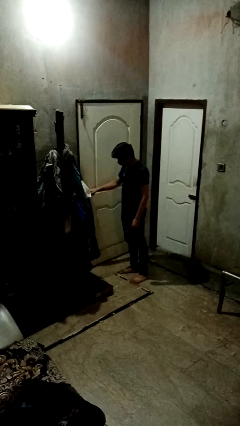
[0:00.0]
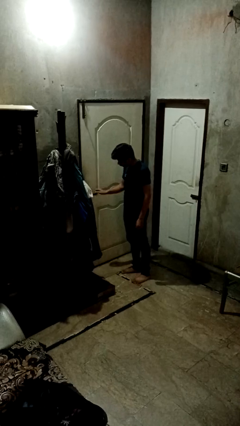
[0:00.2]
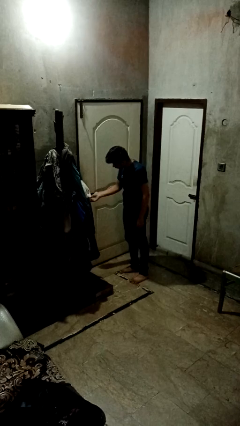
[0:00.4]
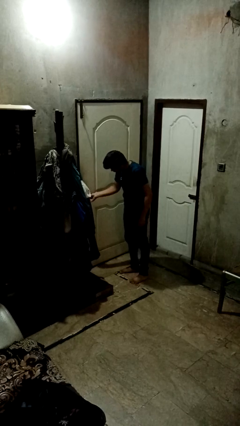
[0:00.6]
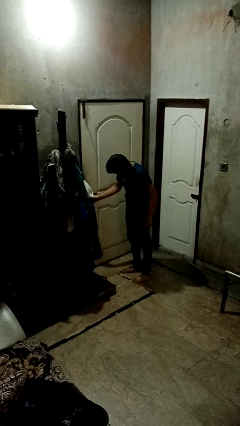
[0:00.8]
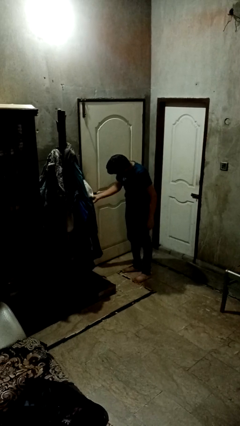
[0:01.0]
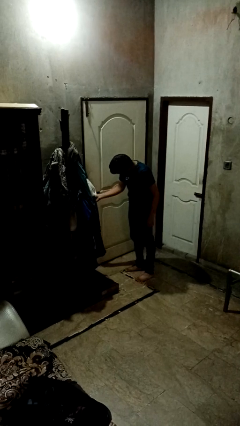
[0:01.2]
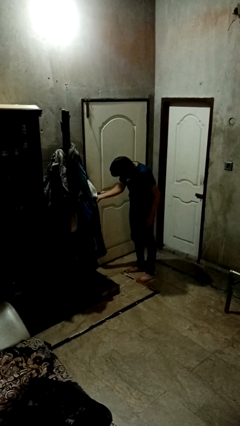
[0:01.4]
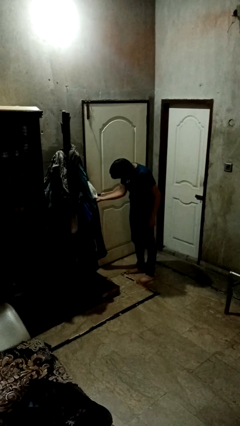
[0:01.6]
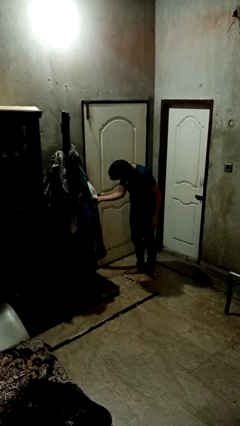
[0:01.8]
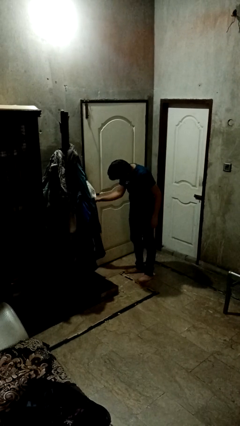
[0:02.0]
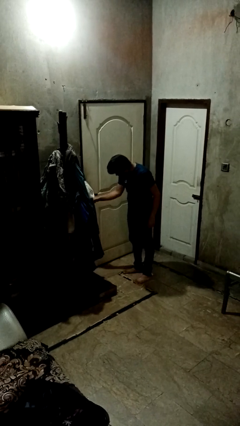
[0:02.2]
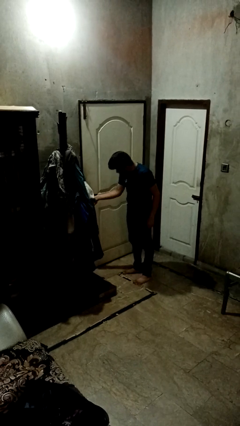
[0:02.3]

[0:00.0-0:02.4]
person locks door with keys

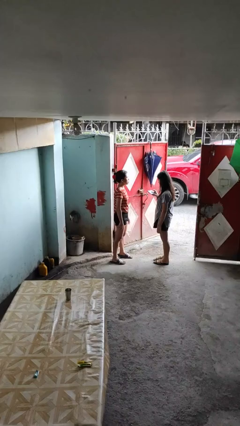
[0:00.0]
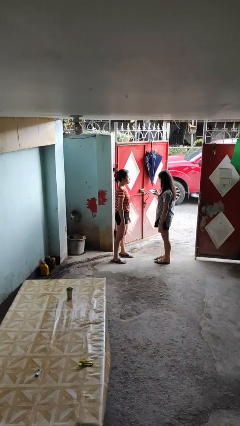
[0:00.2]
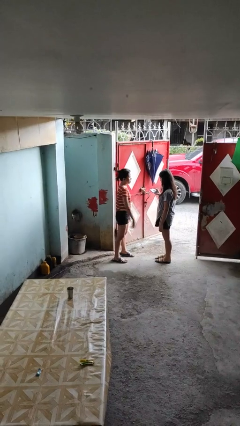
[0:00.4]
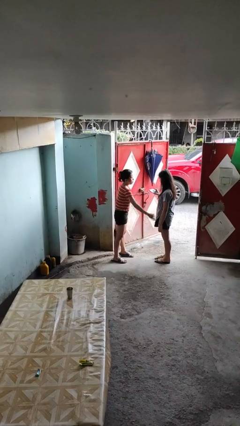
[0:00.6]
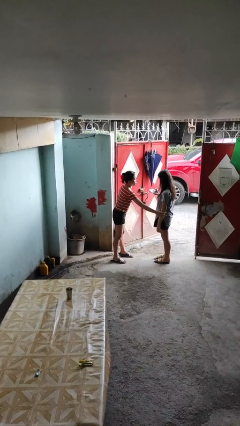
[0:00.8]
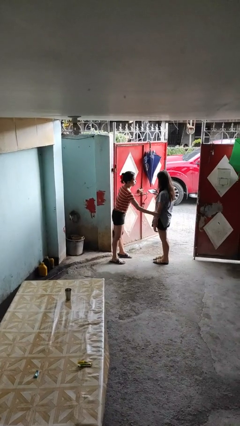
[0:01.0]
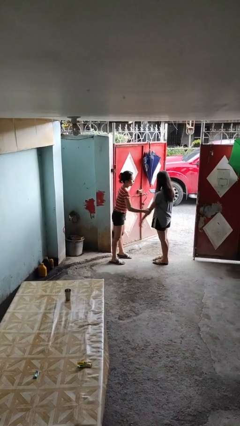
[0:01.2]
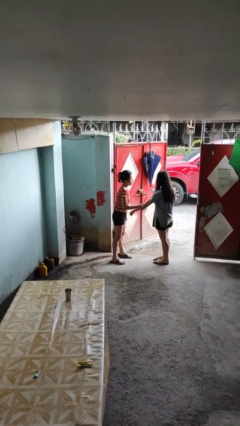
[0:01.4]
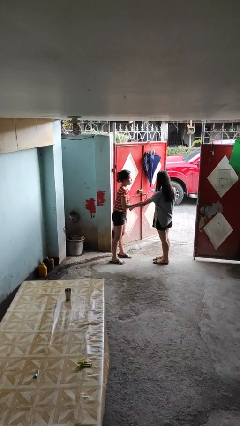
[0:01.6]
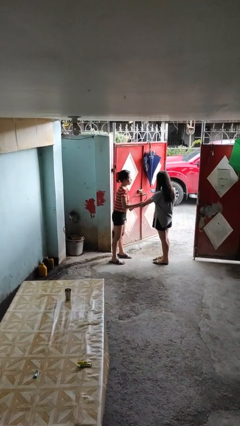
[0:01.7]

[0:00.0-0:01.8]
person grabs person by forearm

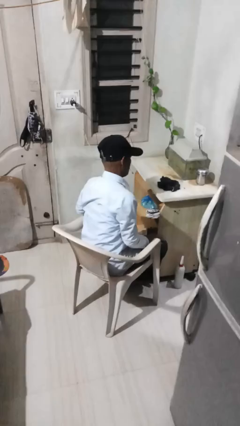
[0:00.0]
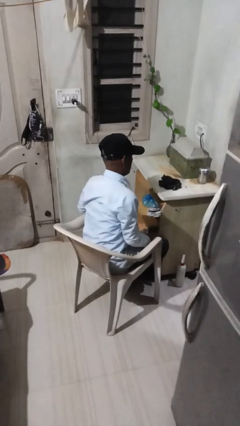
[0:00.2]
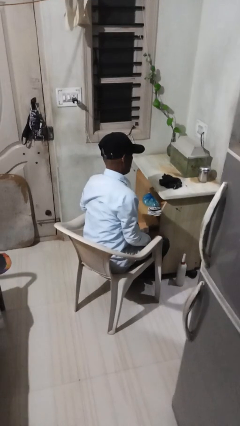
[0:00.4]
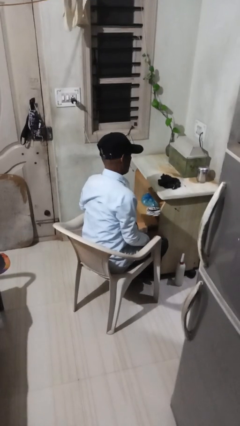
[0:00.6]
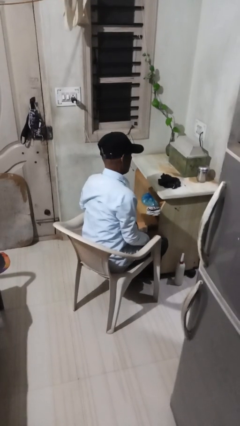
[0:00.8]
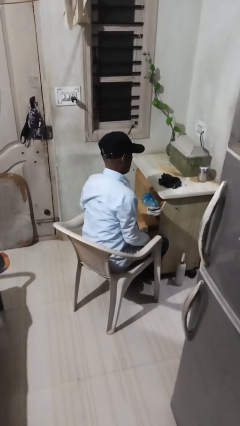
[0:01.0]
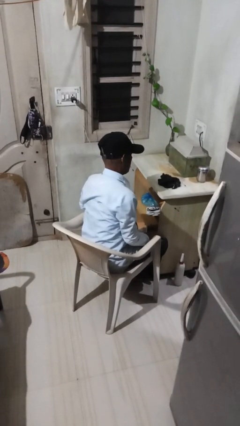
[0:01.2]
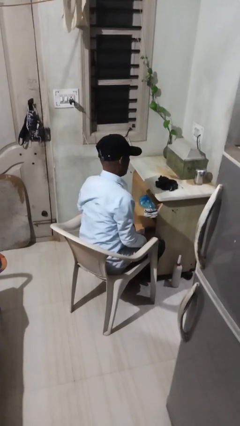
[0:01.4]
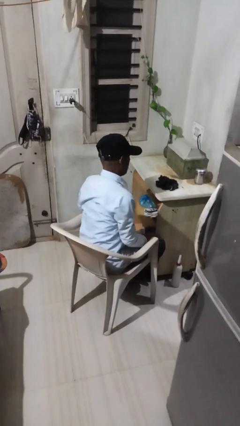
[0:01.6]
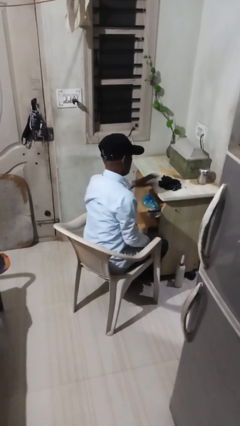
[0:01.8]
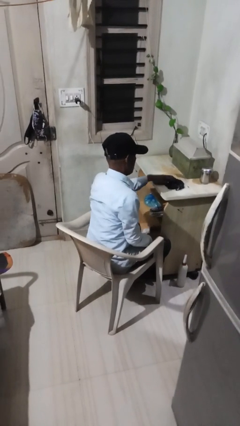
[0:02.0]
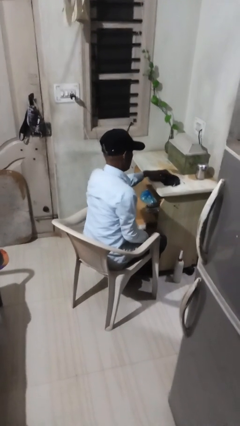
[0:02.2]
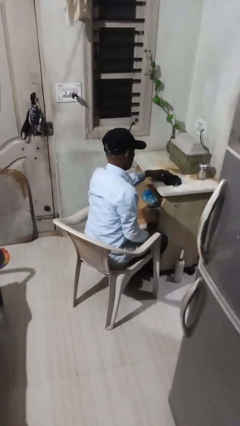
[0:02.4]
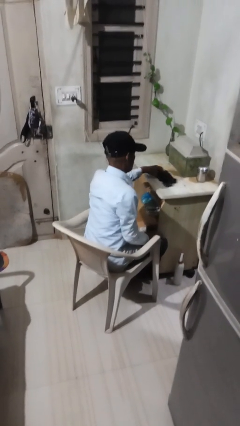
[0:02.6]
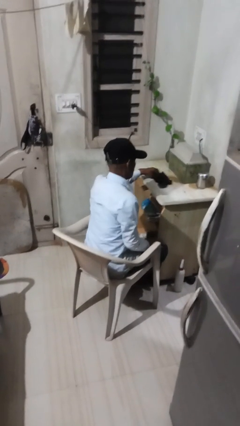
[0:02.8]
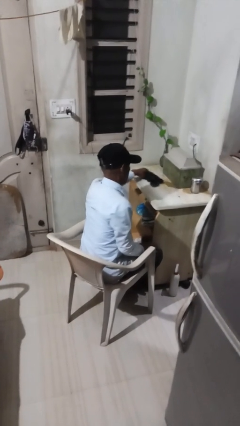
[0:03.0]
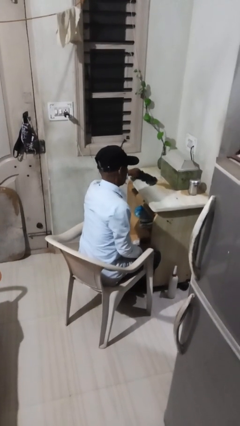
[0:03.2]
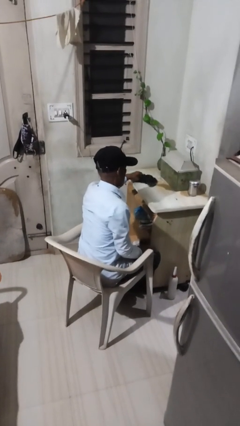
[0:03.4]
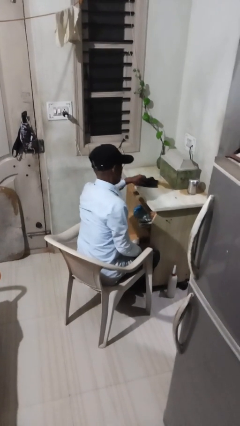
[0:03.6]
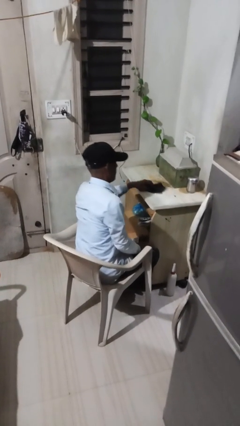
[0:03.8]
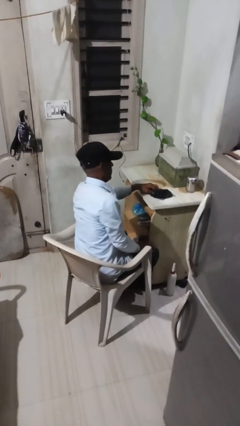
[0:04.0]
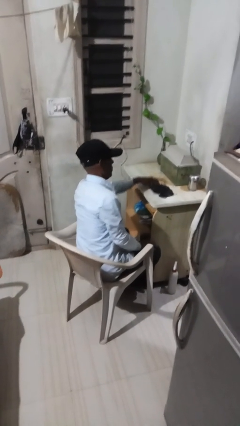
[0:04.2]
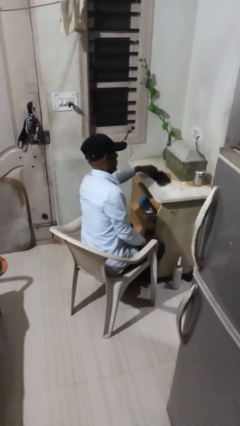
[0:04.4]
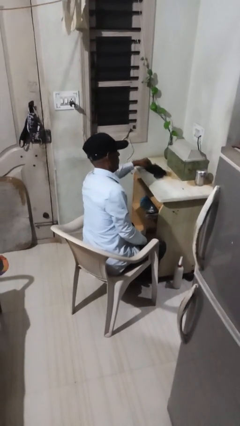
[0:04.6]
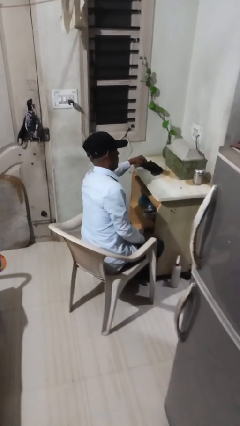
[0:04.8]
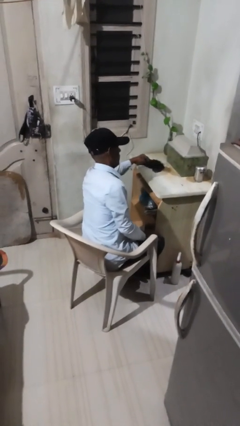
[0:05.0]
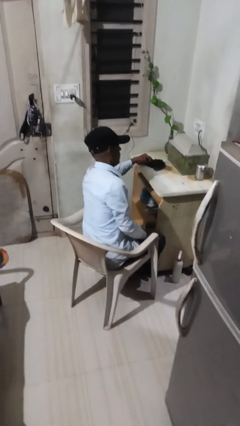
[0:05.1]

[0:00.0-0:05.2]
person cleans table with rag

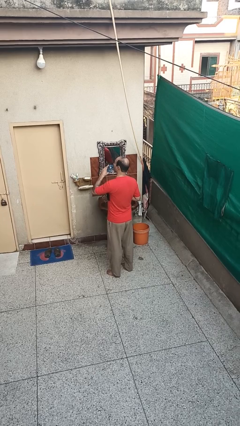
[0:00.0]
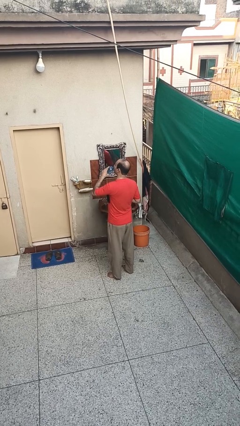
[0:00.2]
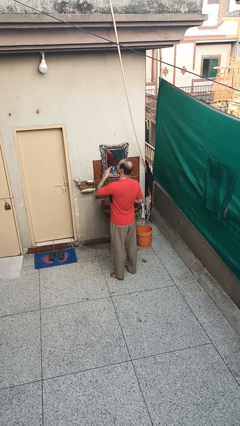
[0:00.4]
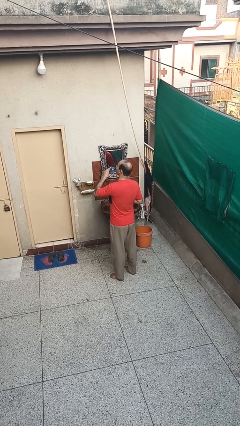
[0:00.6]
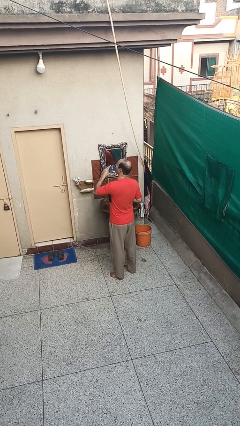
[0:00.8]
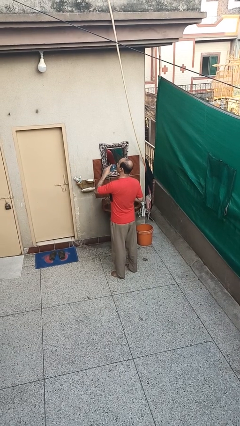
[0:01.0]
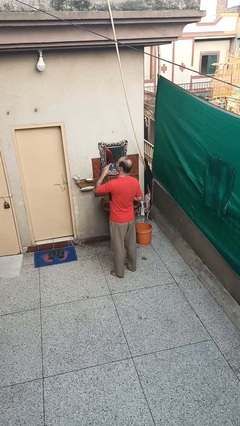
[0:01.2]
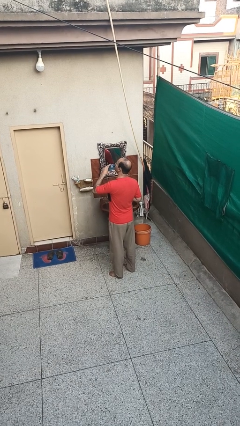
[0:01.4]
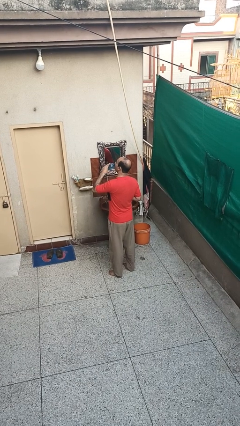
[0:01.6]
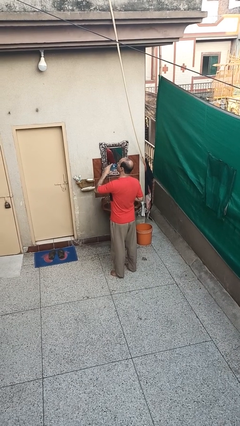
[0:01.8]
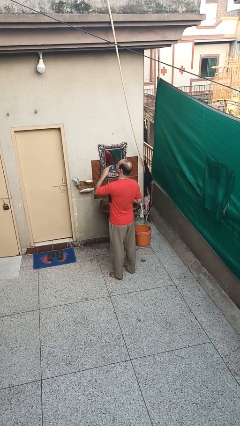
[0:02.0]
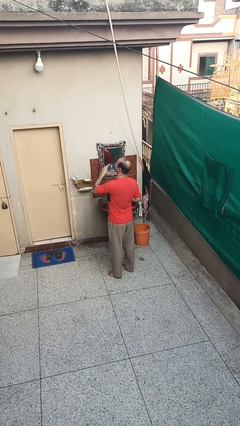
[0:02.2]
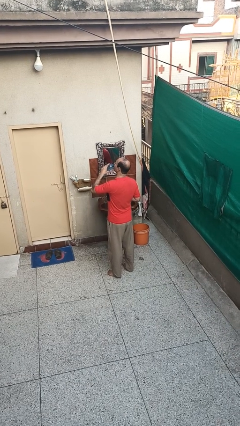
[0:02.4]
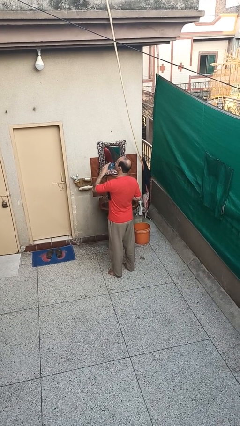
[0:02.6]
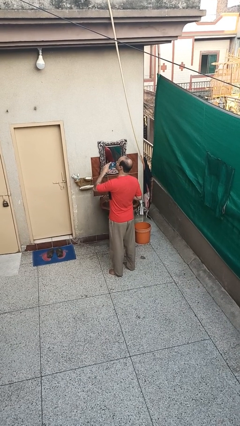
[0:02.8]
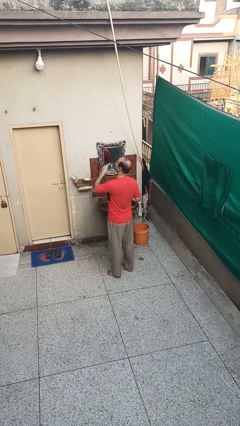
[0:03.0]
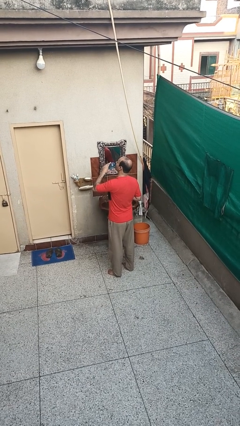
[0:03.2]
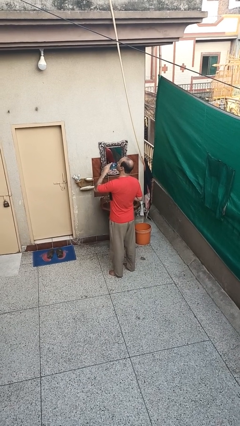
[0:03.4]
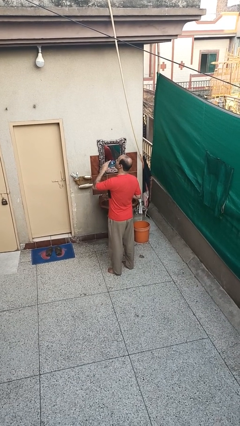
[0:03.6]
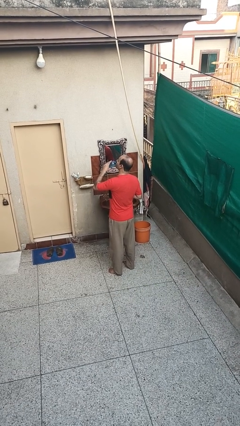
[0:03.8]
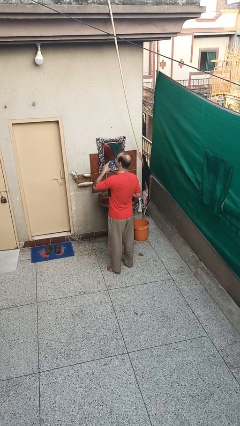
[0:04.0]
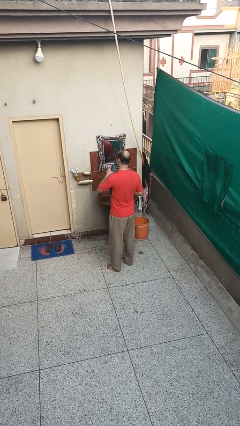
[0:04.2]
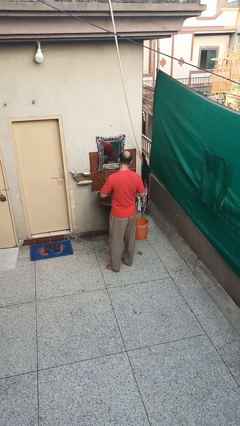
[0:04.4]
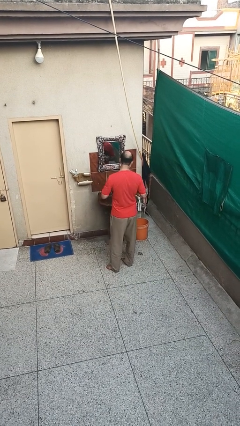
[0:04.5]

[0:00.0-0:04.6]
person drinks from bottle

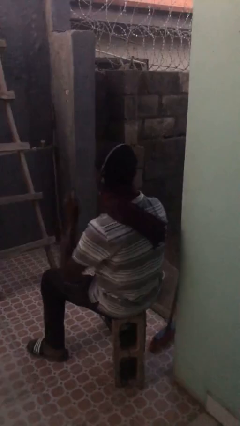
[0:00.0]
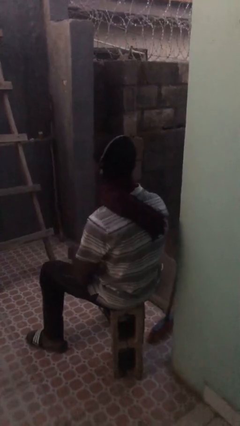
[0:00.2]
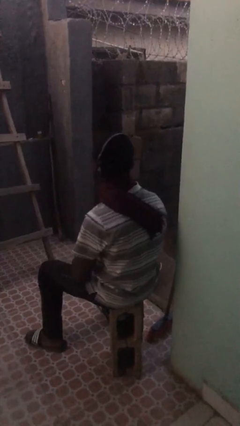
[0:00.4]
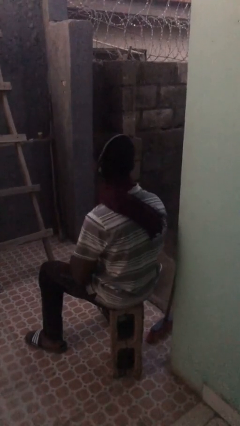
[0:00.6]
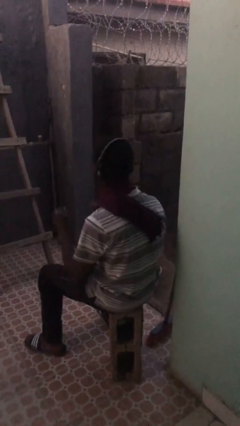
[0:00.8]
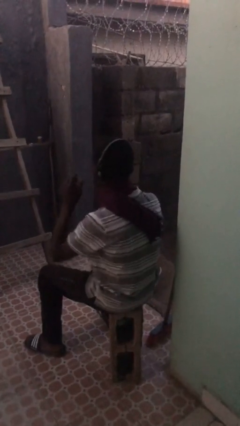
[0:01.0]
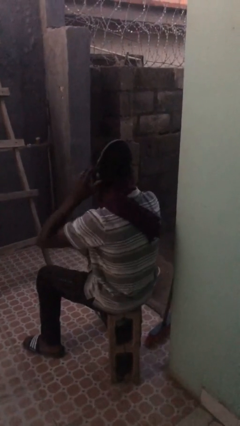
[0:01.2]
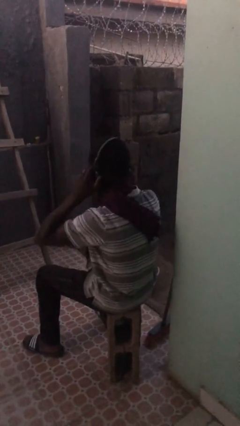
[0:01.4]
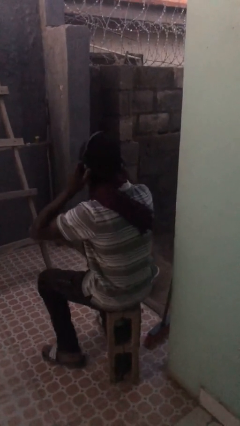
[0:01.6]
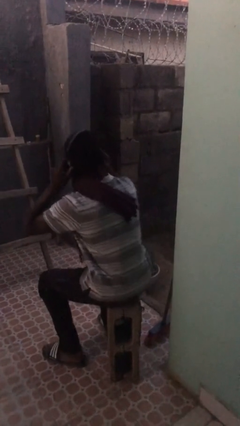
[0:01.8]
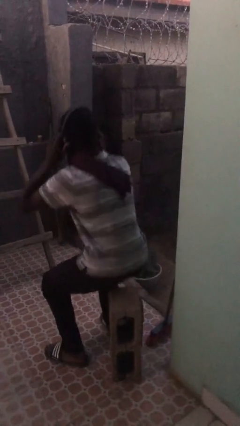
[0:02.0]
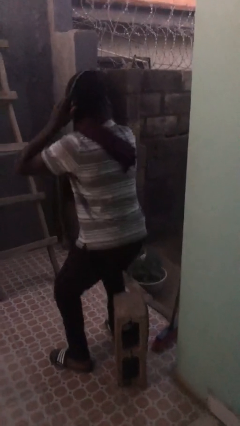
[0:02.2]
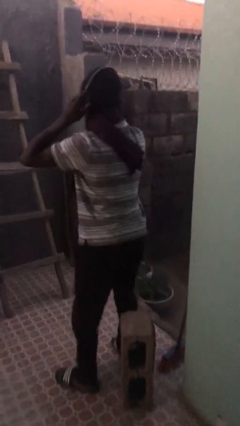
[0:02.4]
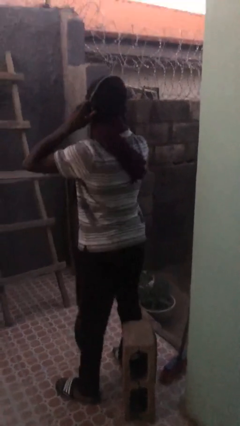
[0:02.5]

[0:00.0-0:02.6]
person puts on headphones

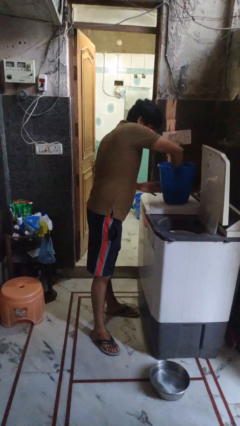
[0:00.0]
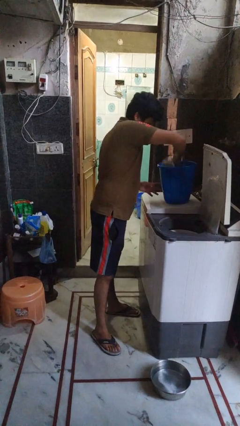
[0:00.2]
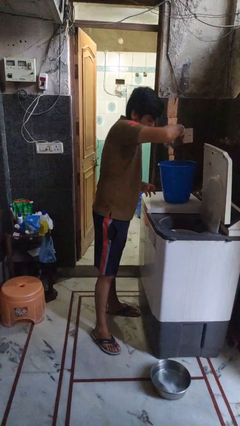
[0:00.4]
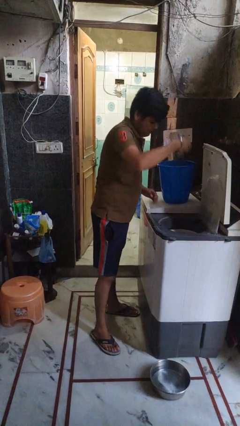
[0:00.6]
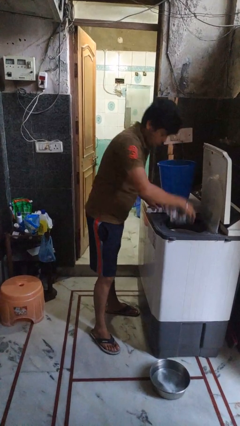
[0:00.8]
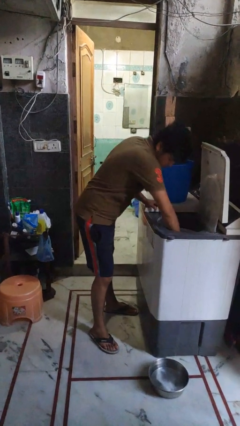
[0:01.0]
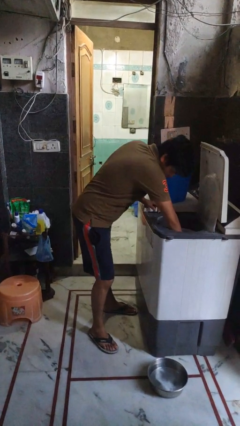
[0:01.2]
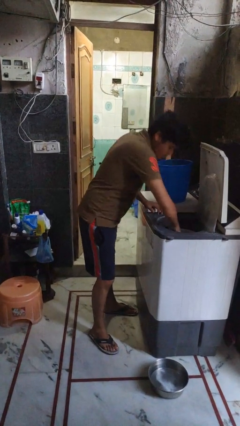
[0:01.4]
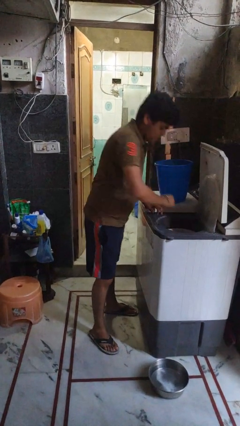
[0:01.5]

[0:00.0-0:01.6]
person loads dryer
